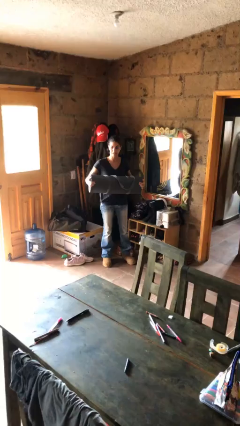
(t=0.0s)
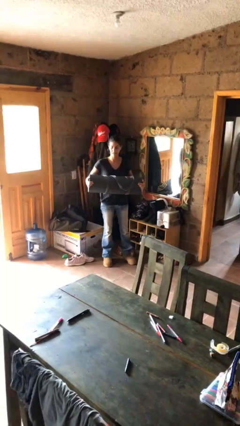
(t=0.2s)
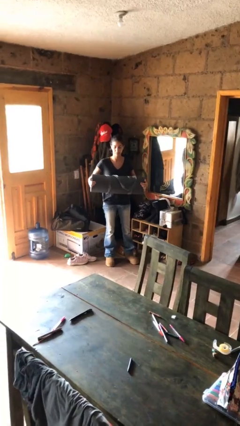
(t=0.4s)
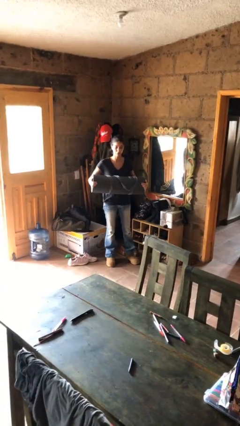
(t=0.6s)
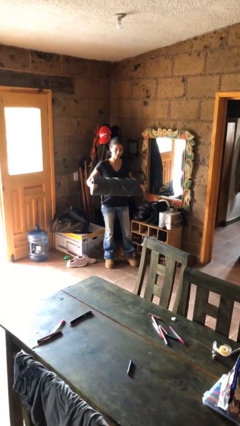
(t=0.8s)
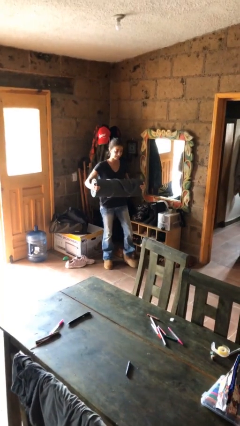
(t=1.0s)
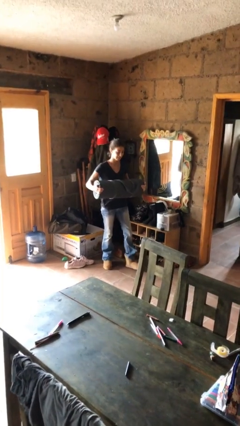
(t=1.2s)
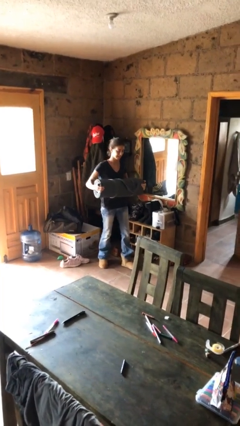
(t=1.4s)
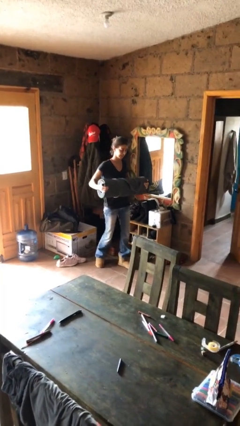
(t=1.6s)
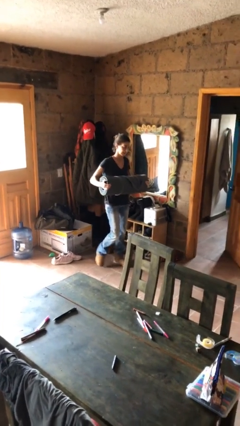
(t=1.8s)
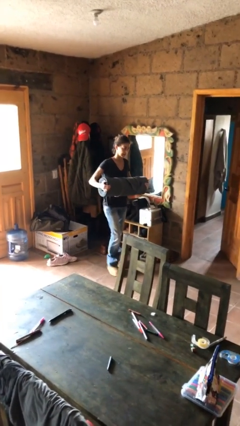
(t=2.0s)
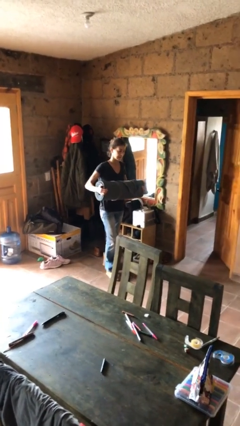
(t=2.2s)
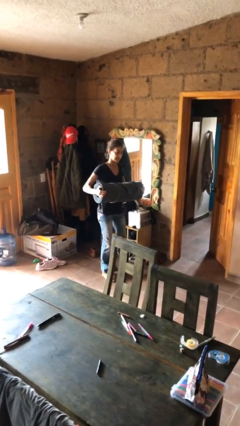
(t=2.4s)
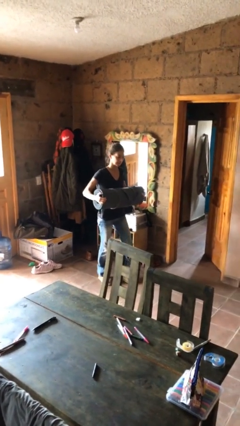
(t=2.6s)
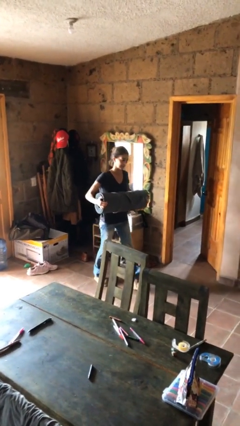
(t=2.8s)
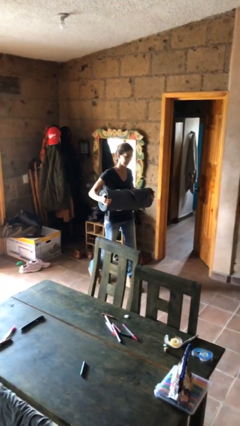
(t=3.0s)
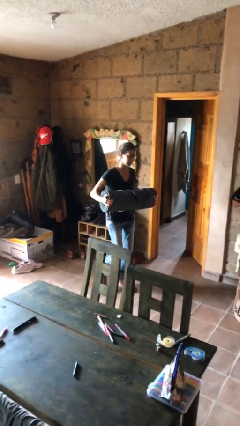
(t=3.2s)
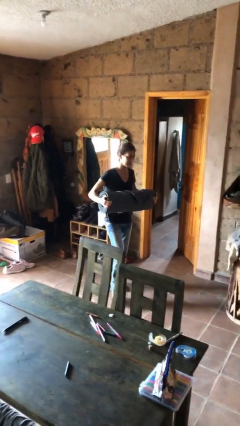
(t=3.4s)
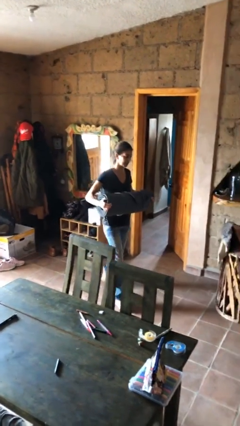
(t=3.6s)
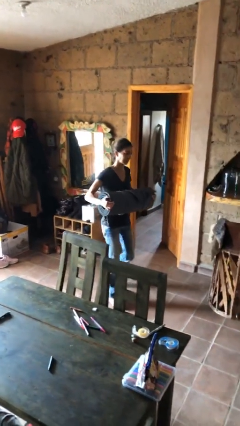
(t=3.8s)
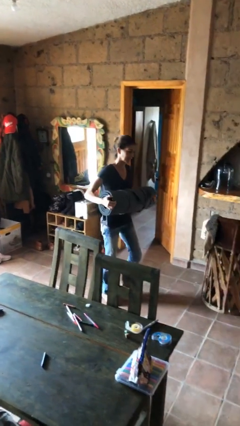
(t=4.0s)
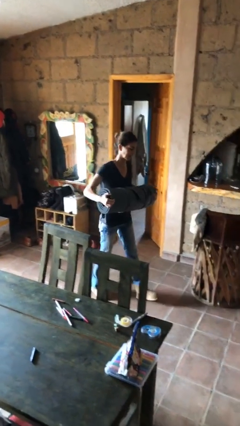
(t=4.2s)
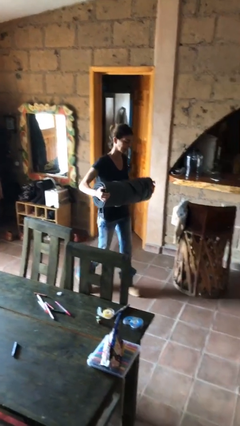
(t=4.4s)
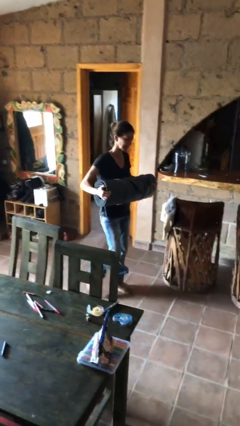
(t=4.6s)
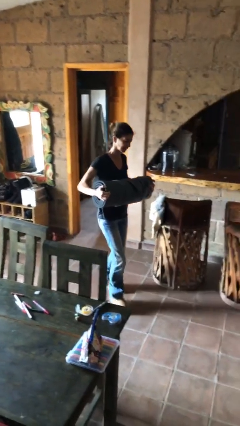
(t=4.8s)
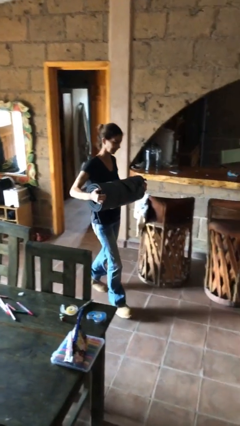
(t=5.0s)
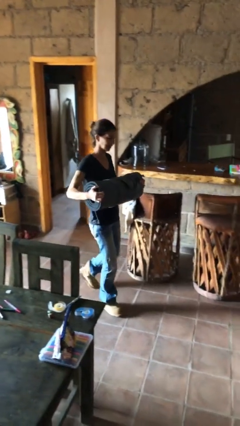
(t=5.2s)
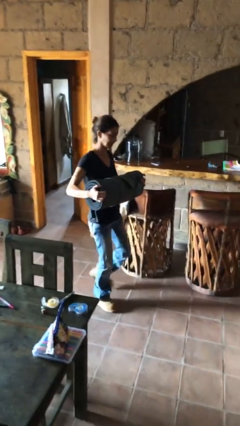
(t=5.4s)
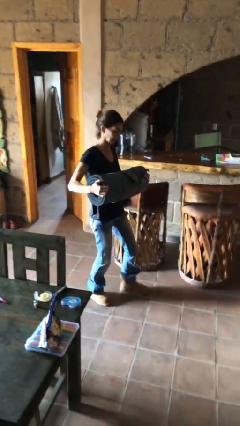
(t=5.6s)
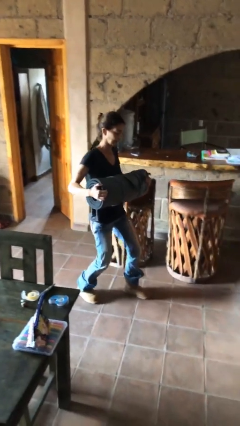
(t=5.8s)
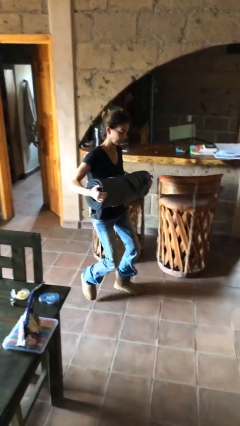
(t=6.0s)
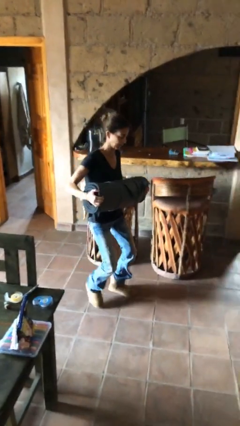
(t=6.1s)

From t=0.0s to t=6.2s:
person carries heavy object

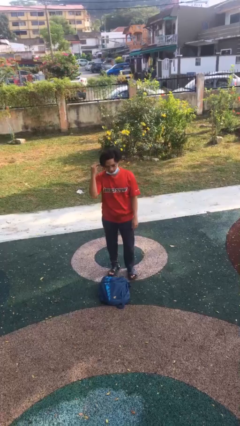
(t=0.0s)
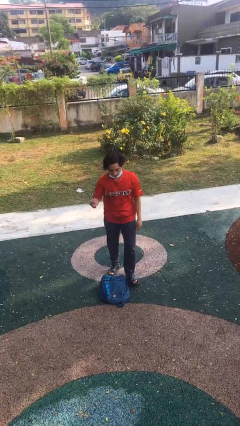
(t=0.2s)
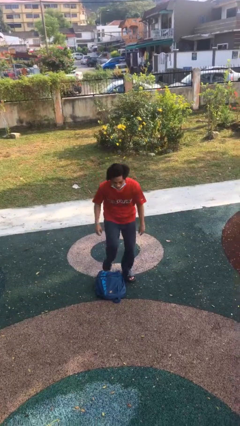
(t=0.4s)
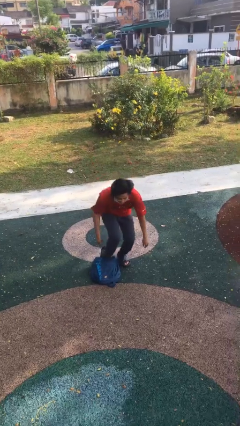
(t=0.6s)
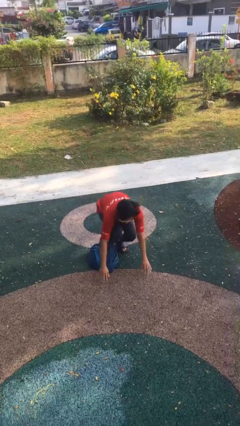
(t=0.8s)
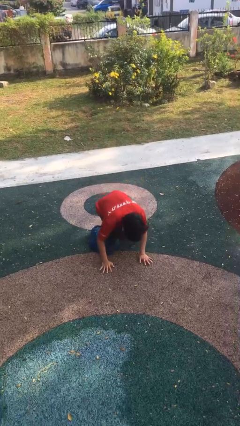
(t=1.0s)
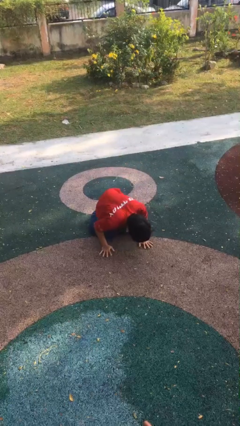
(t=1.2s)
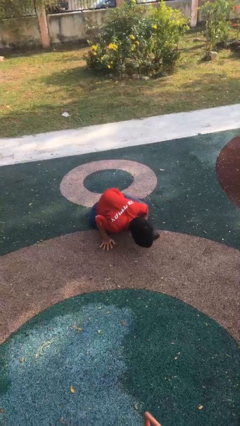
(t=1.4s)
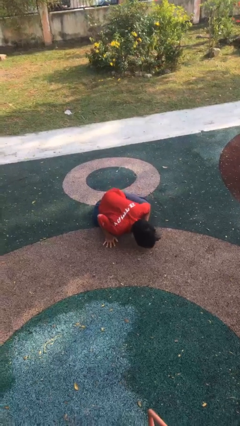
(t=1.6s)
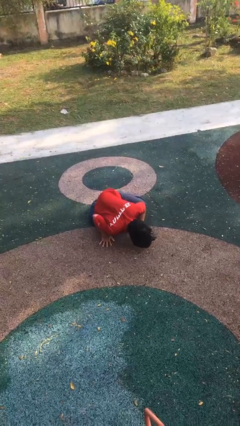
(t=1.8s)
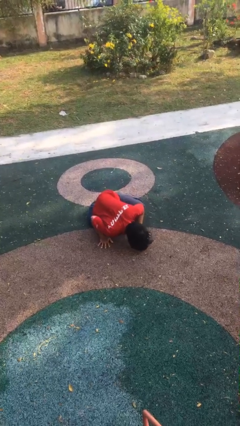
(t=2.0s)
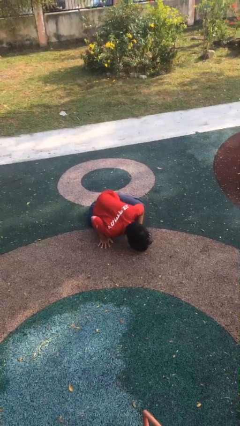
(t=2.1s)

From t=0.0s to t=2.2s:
person trips on object on floor

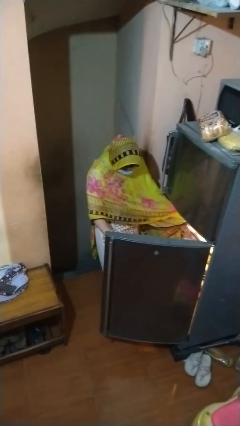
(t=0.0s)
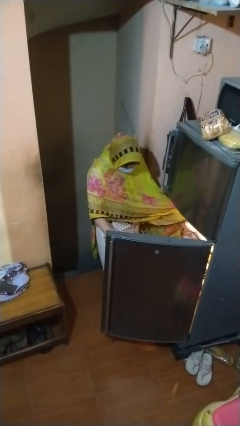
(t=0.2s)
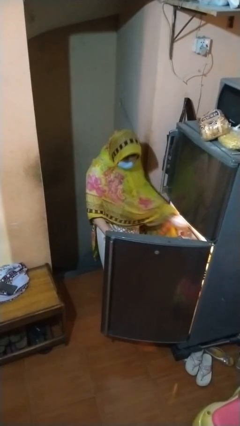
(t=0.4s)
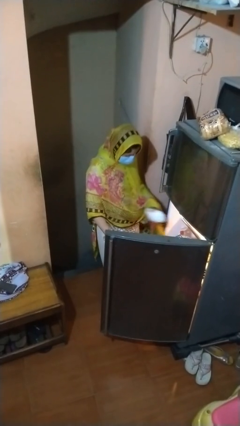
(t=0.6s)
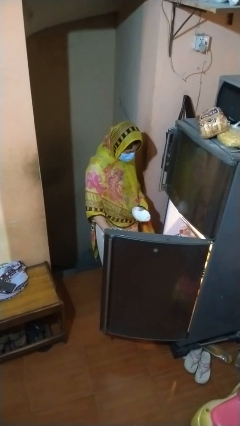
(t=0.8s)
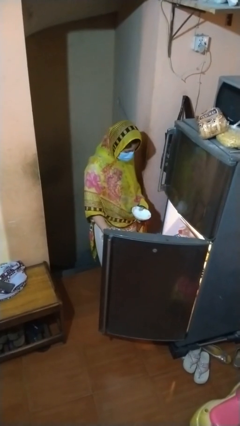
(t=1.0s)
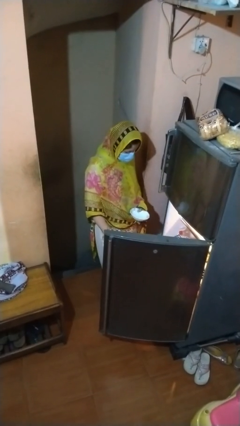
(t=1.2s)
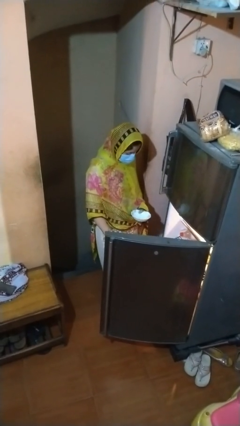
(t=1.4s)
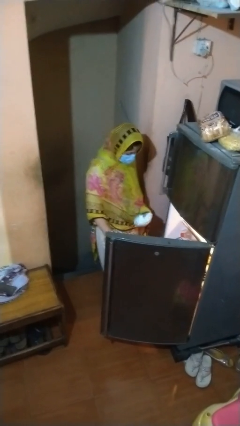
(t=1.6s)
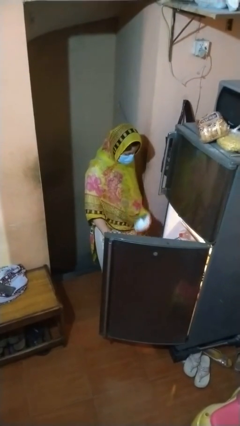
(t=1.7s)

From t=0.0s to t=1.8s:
person takes object from refrigerator

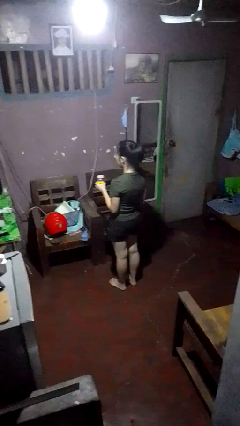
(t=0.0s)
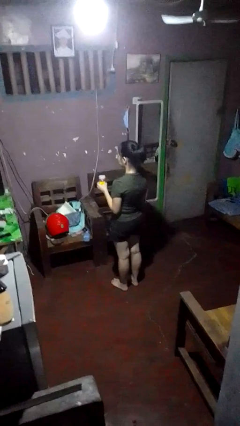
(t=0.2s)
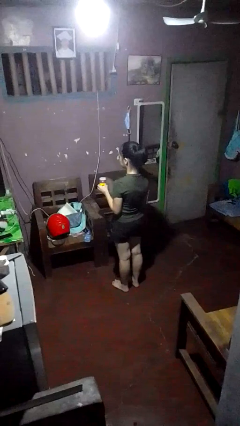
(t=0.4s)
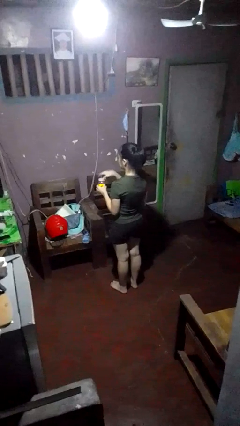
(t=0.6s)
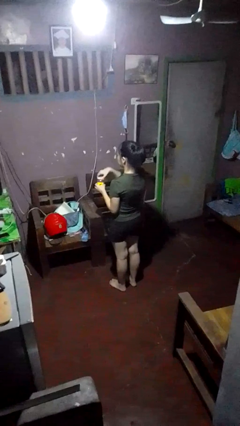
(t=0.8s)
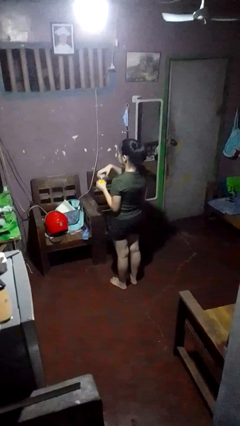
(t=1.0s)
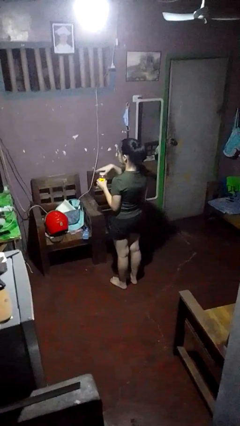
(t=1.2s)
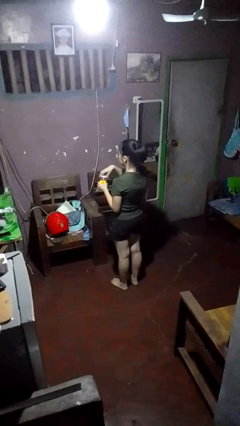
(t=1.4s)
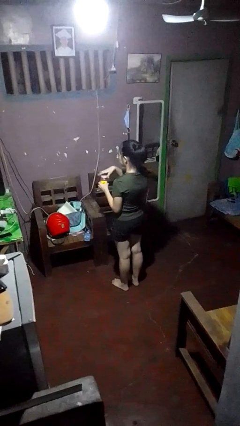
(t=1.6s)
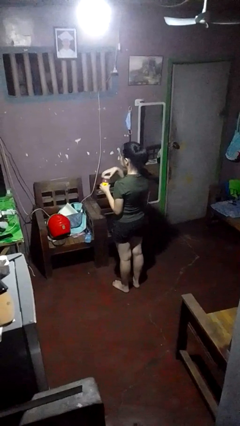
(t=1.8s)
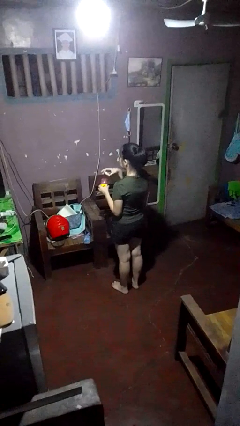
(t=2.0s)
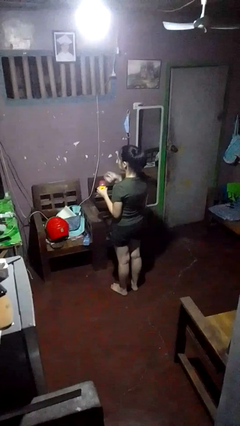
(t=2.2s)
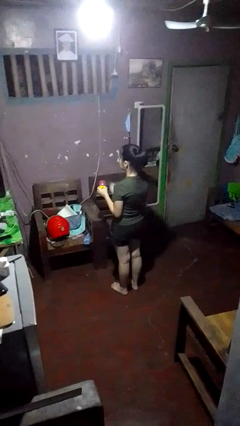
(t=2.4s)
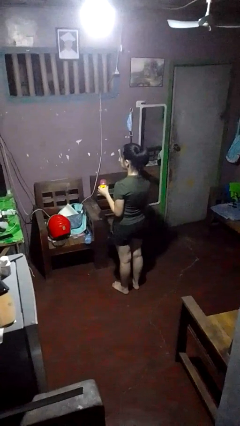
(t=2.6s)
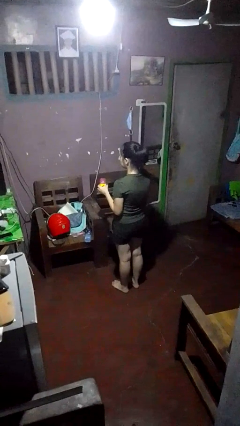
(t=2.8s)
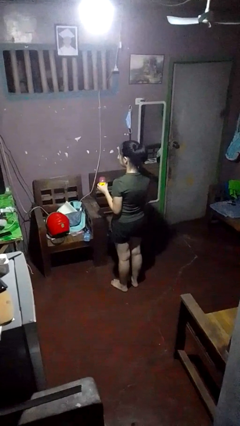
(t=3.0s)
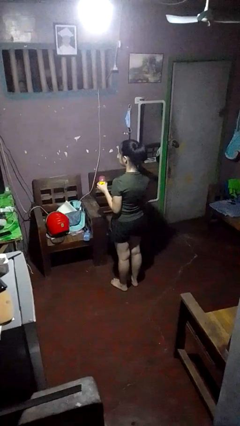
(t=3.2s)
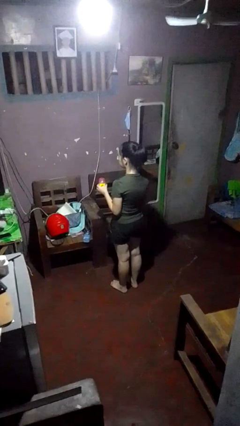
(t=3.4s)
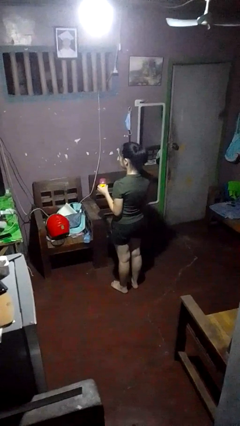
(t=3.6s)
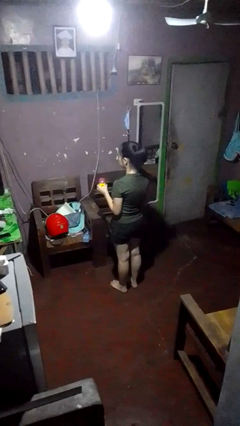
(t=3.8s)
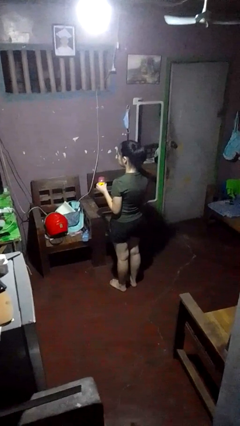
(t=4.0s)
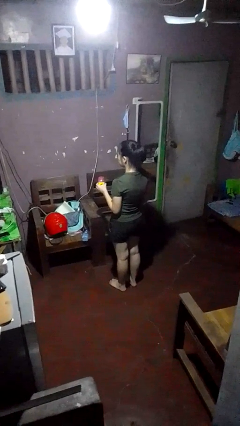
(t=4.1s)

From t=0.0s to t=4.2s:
person opens jar

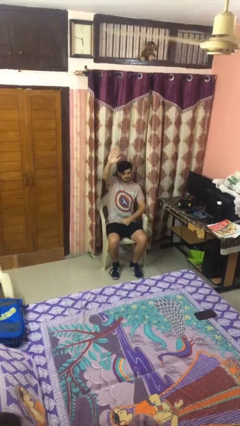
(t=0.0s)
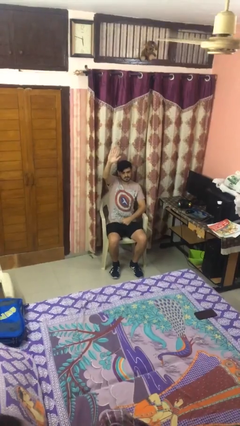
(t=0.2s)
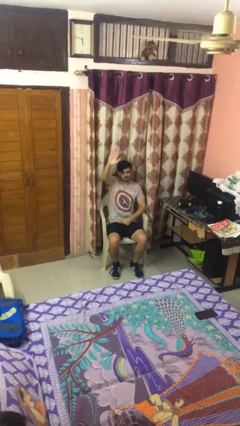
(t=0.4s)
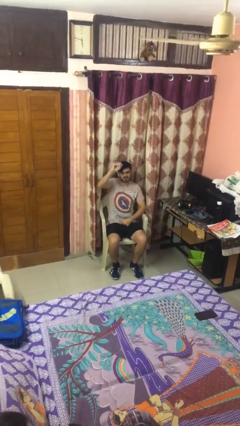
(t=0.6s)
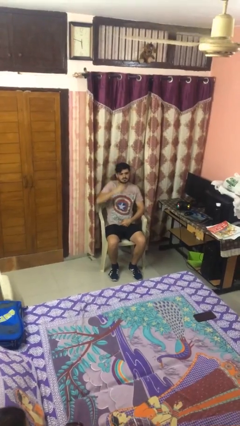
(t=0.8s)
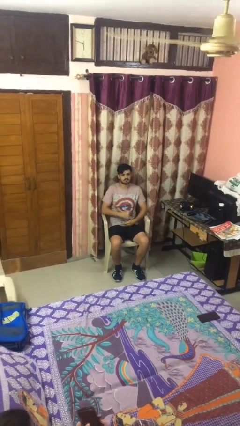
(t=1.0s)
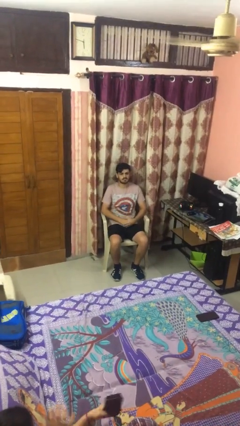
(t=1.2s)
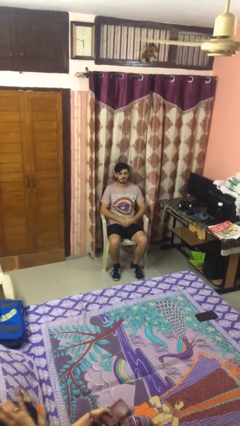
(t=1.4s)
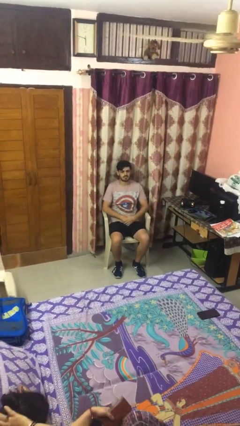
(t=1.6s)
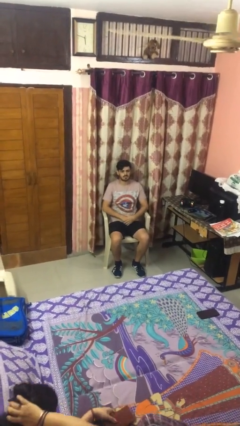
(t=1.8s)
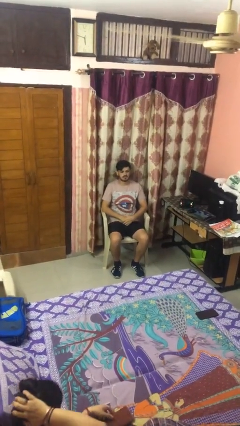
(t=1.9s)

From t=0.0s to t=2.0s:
person gestures lower hand

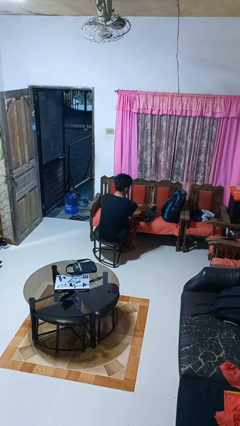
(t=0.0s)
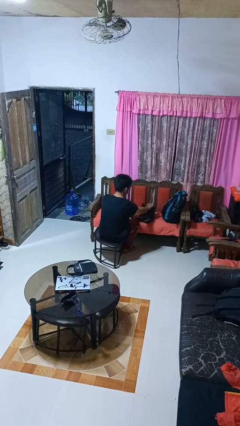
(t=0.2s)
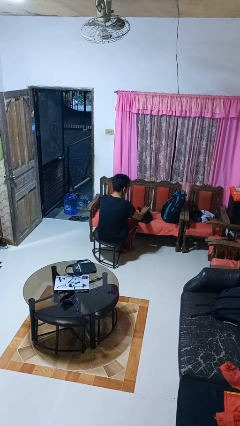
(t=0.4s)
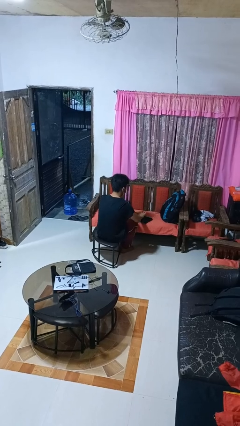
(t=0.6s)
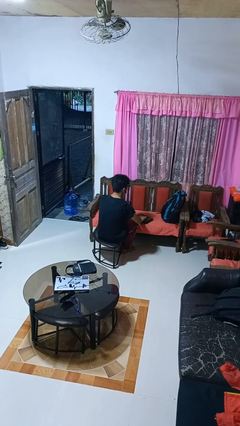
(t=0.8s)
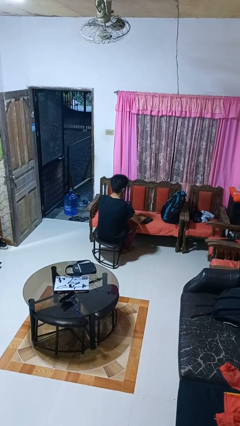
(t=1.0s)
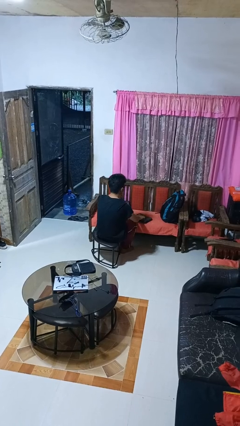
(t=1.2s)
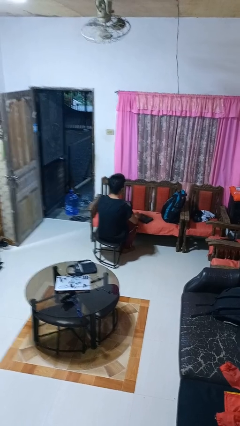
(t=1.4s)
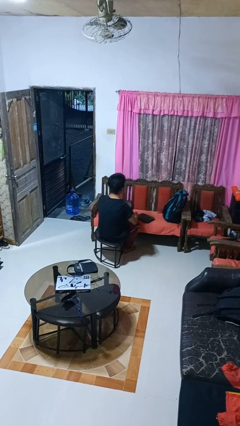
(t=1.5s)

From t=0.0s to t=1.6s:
person closes laptop
